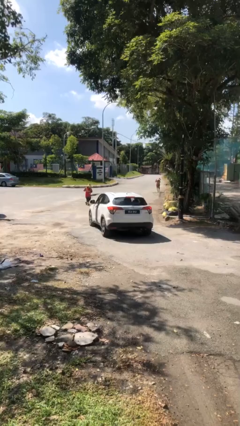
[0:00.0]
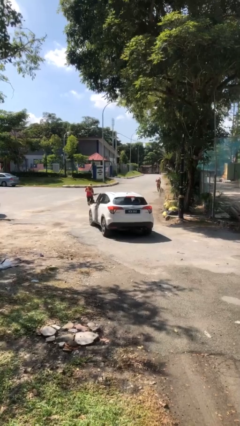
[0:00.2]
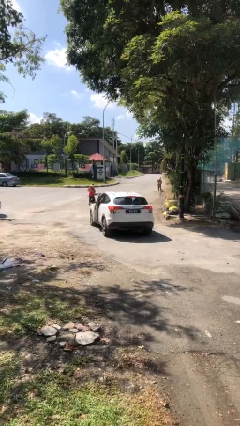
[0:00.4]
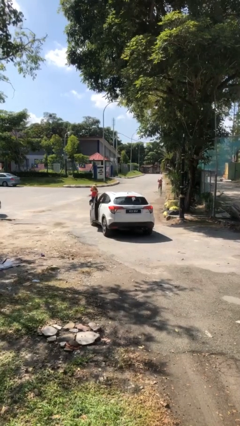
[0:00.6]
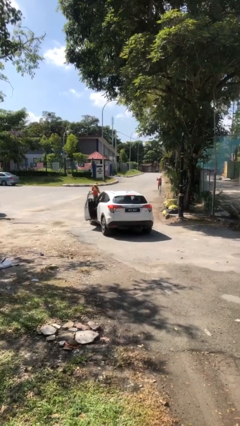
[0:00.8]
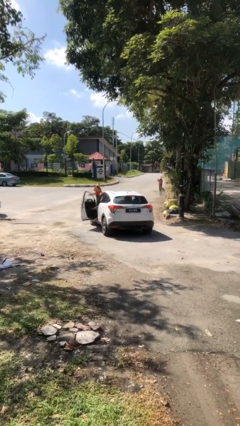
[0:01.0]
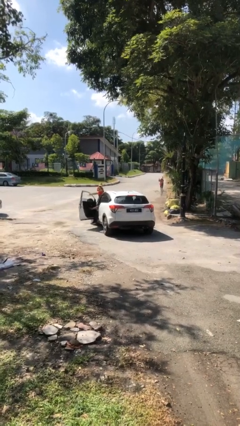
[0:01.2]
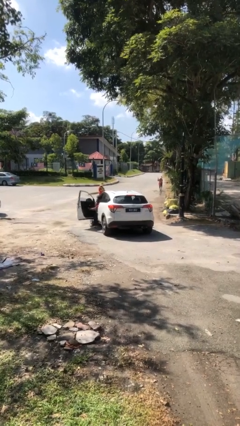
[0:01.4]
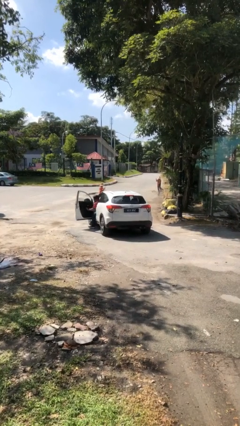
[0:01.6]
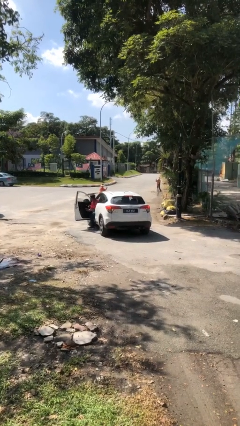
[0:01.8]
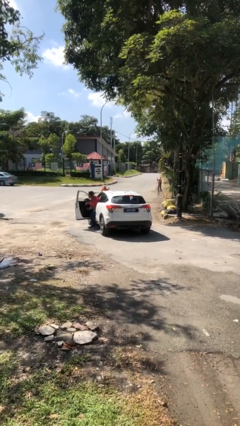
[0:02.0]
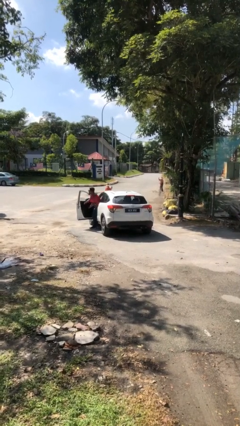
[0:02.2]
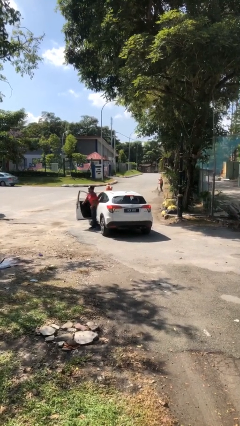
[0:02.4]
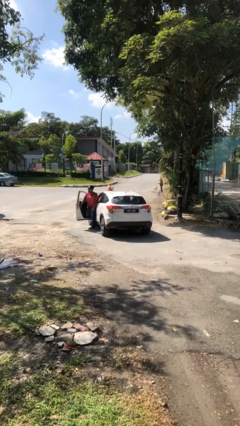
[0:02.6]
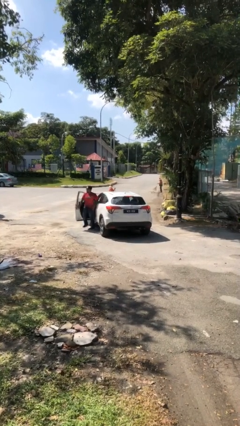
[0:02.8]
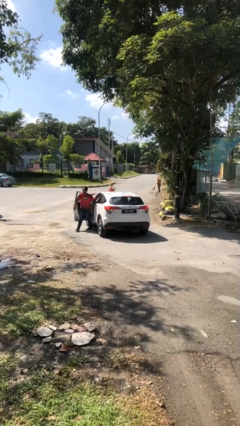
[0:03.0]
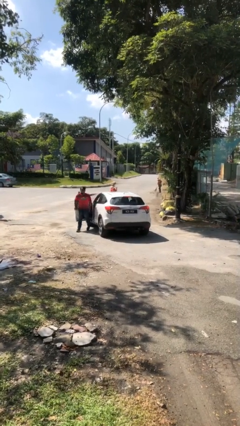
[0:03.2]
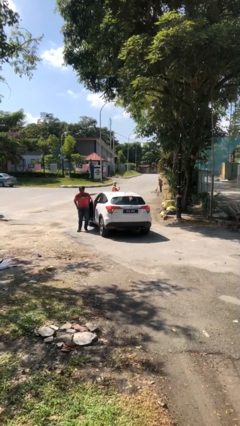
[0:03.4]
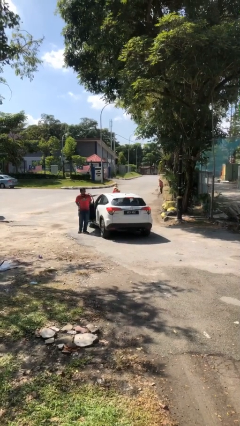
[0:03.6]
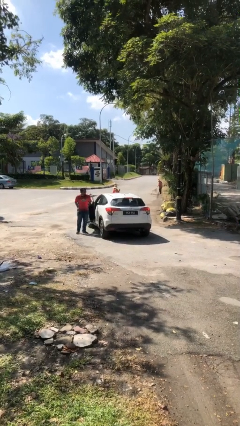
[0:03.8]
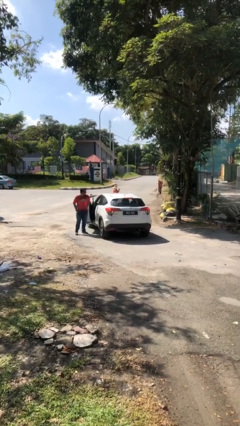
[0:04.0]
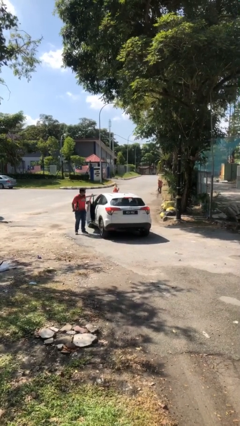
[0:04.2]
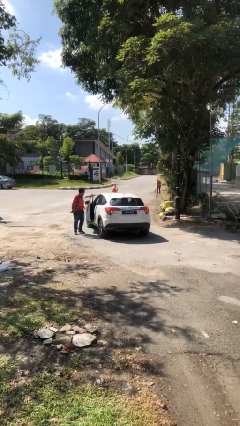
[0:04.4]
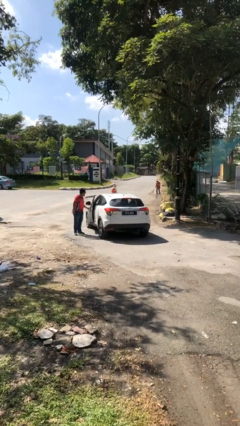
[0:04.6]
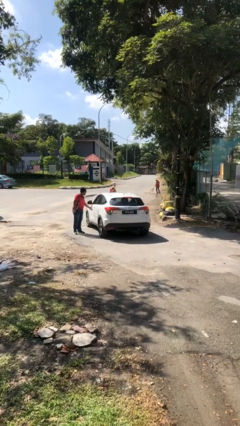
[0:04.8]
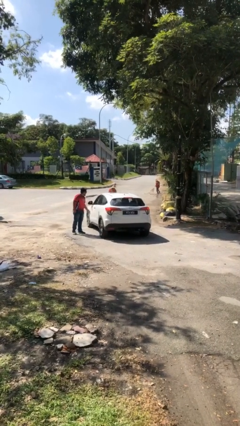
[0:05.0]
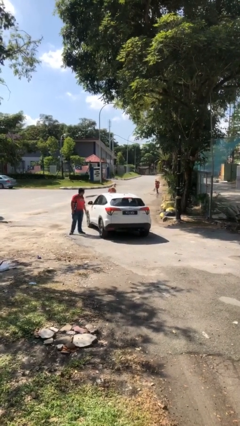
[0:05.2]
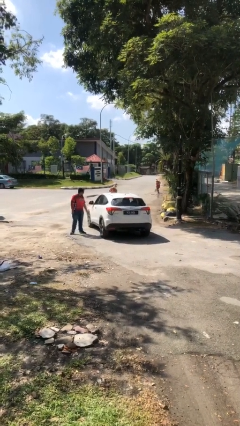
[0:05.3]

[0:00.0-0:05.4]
car drops off person

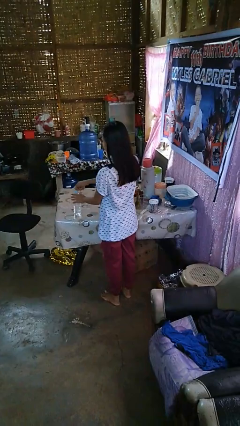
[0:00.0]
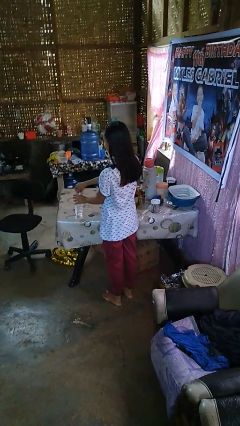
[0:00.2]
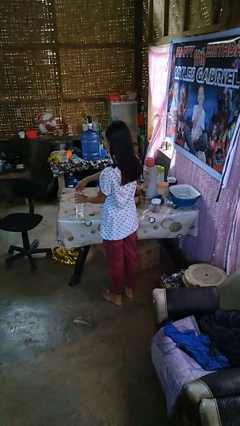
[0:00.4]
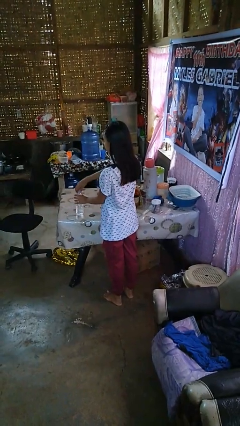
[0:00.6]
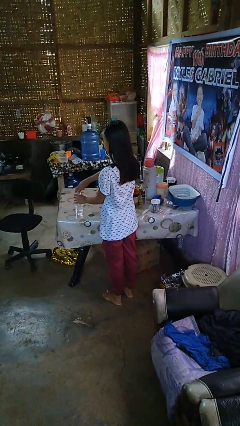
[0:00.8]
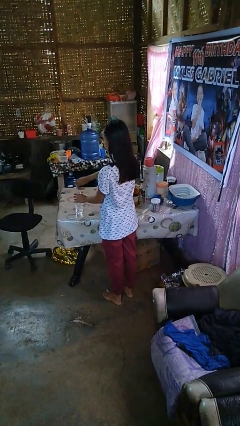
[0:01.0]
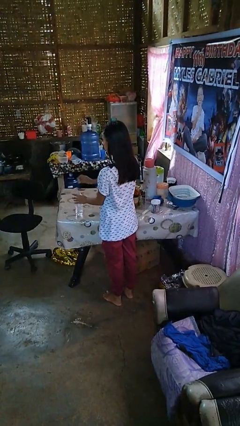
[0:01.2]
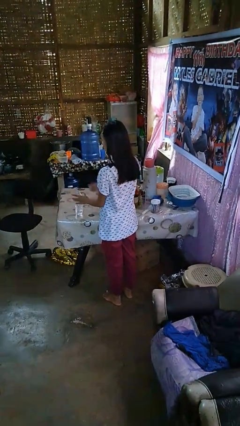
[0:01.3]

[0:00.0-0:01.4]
person unscrews lid from bottle

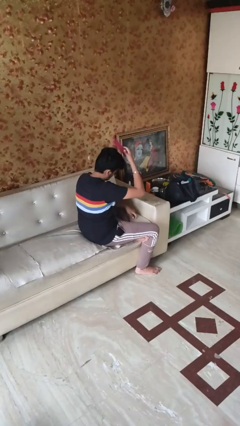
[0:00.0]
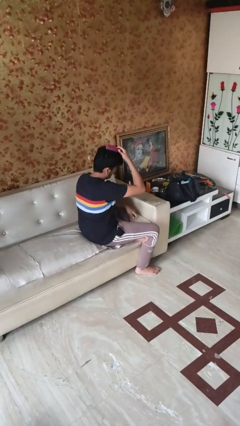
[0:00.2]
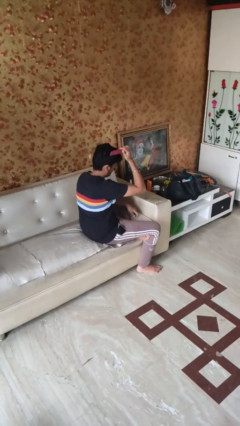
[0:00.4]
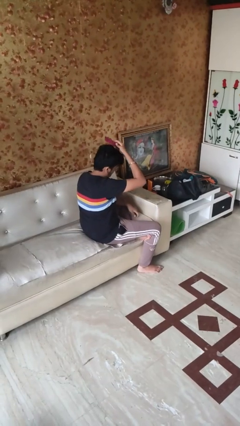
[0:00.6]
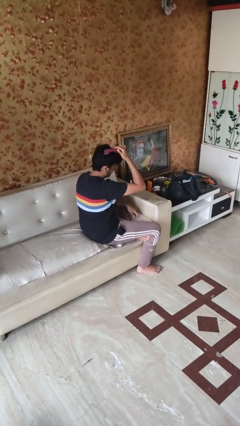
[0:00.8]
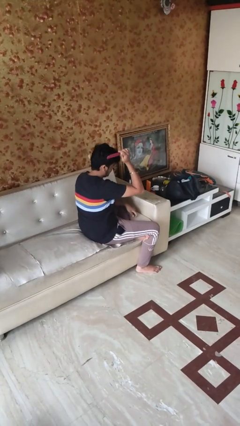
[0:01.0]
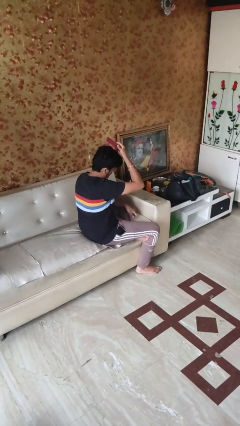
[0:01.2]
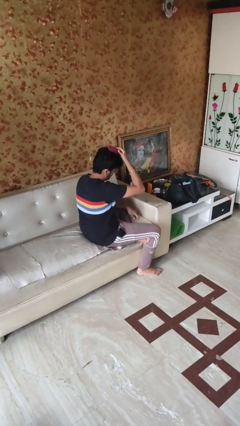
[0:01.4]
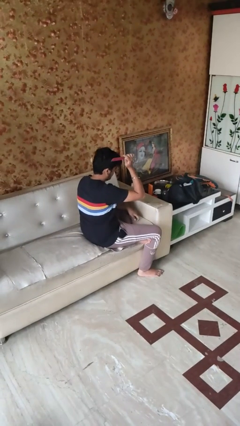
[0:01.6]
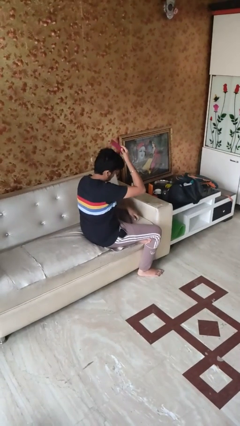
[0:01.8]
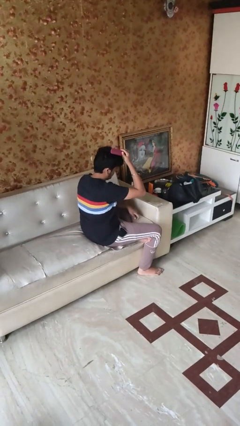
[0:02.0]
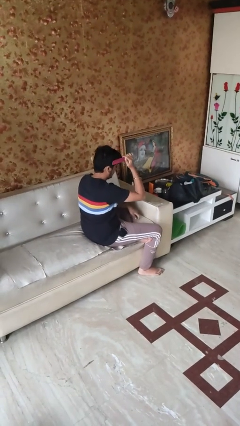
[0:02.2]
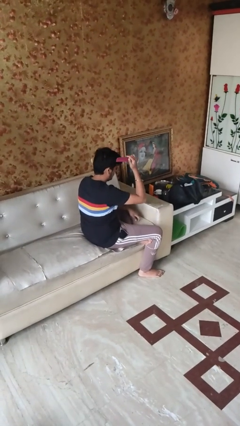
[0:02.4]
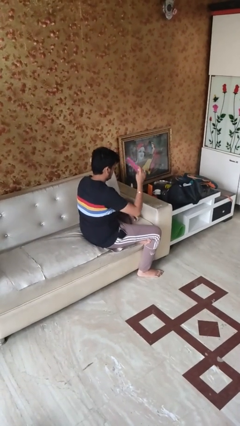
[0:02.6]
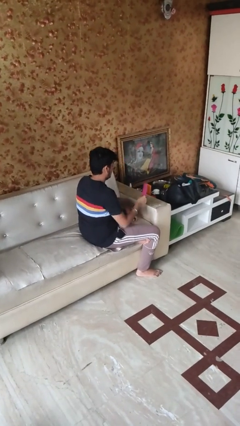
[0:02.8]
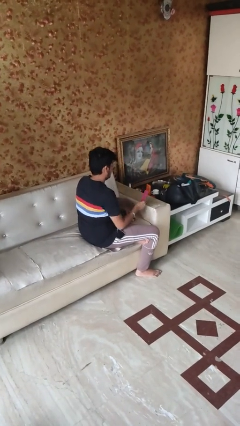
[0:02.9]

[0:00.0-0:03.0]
person brushes hair

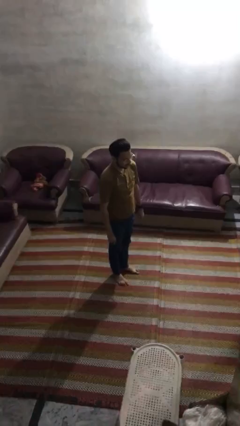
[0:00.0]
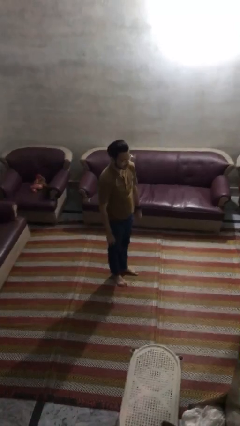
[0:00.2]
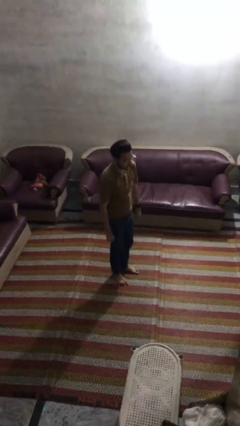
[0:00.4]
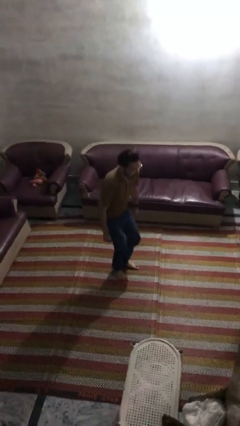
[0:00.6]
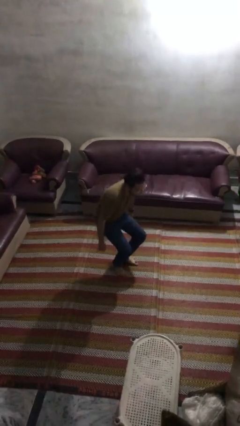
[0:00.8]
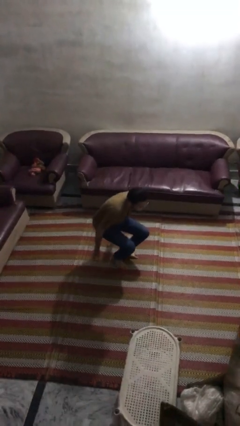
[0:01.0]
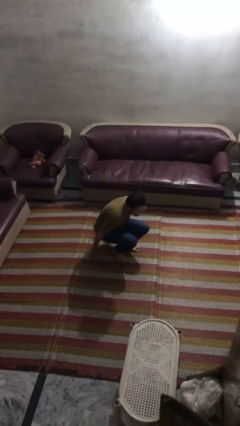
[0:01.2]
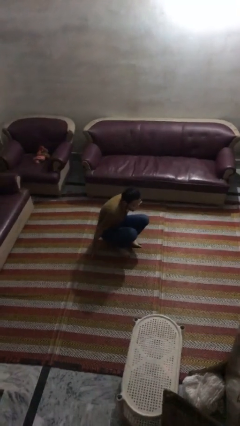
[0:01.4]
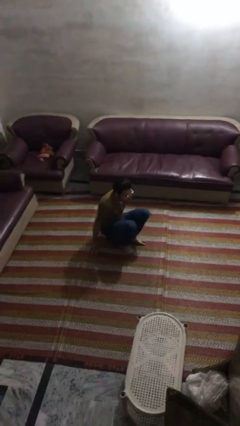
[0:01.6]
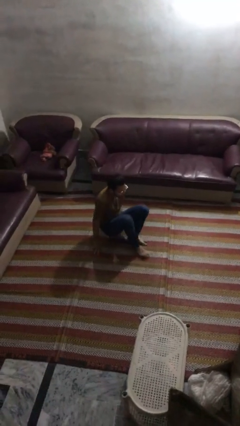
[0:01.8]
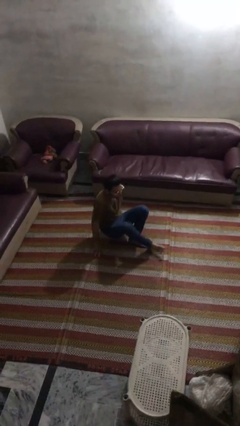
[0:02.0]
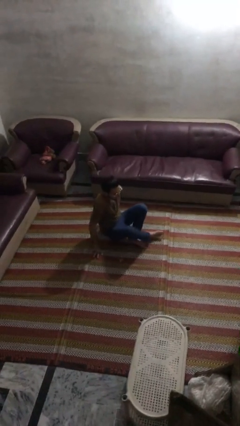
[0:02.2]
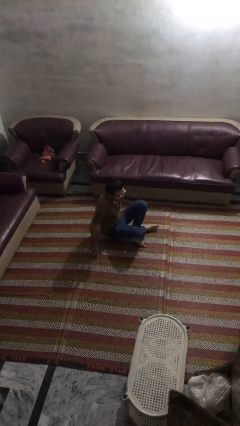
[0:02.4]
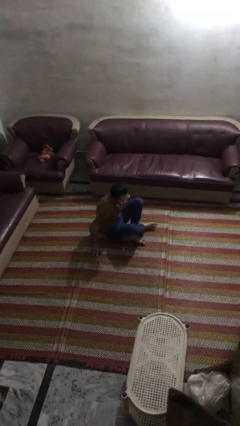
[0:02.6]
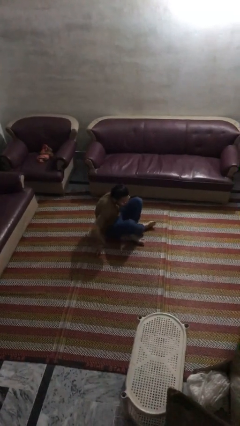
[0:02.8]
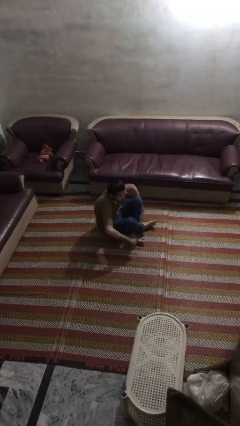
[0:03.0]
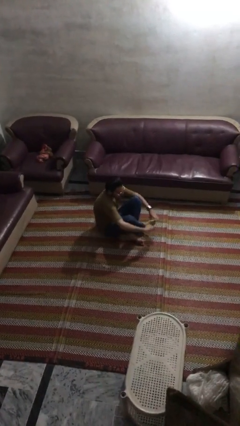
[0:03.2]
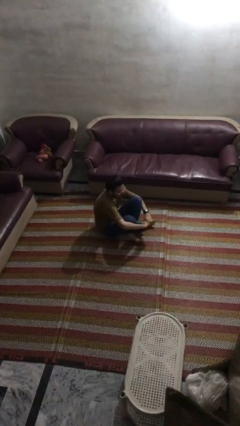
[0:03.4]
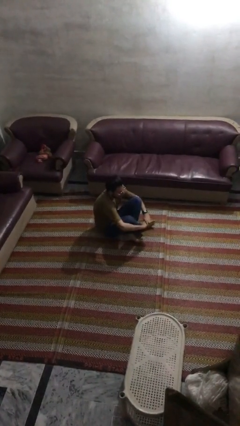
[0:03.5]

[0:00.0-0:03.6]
person sits crisscross

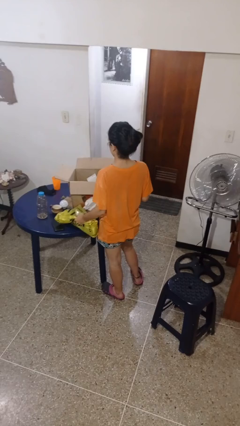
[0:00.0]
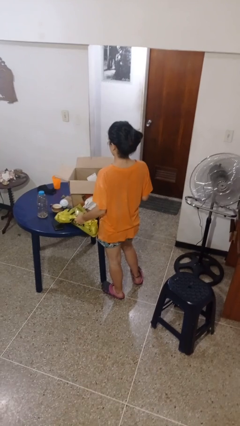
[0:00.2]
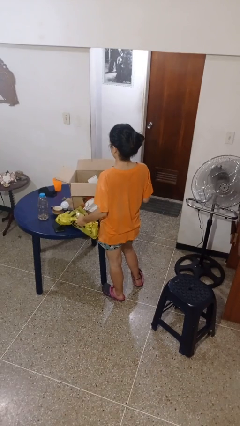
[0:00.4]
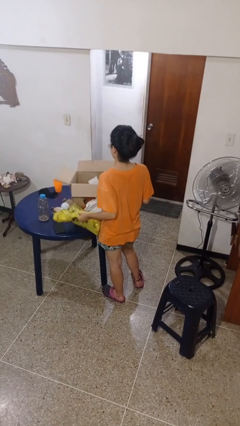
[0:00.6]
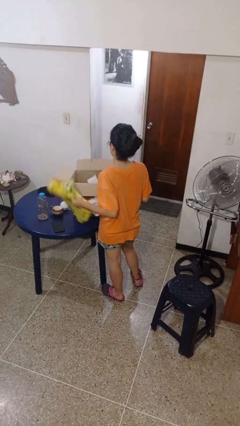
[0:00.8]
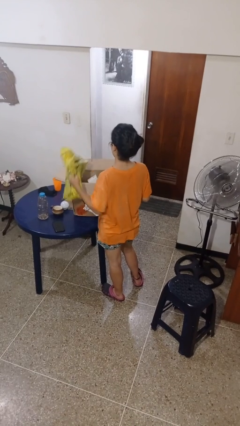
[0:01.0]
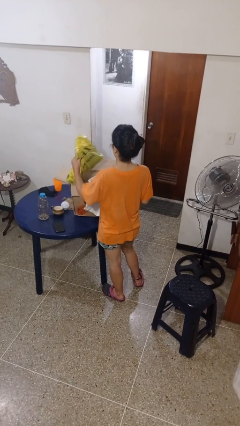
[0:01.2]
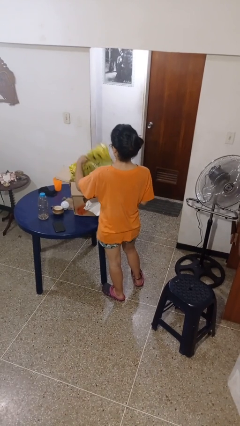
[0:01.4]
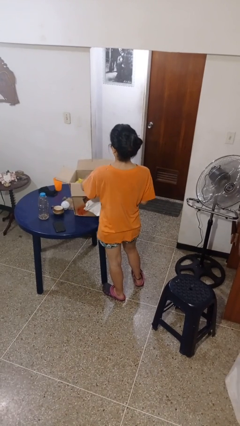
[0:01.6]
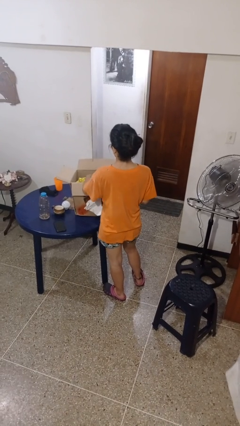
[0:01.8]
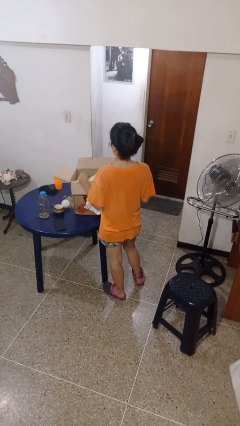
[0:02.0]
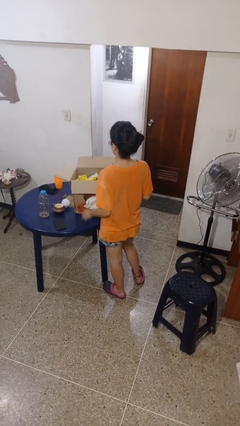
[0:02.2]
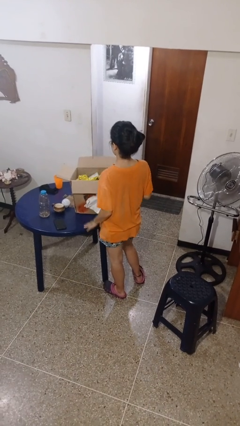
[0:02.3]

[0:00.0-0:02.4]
person puts object into box

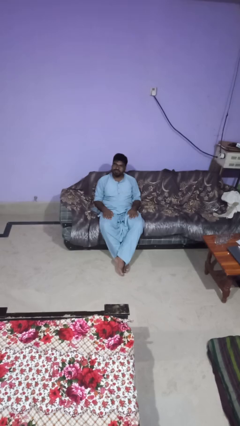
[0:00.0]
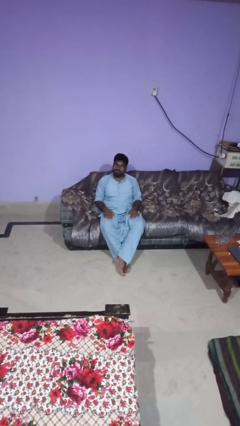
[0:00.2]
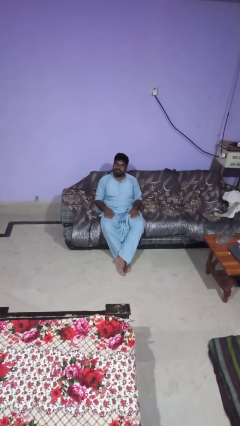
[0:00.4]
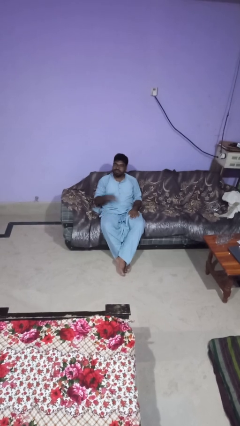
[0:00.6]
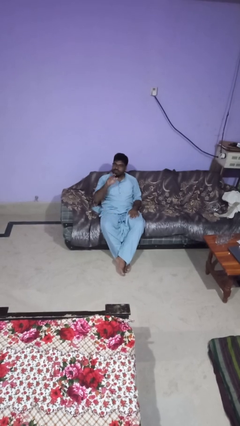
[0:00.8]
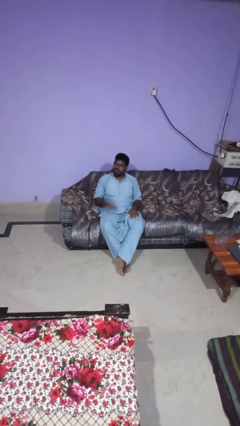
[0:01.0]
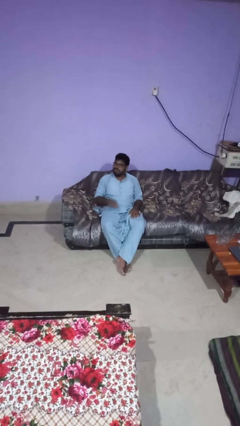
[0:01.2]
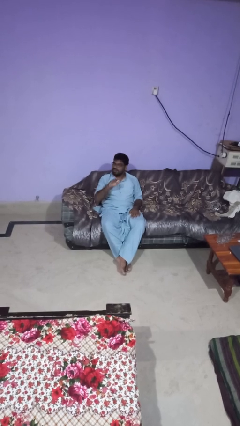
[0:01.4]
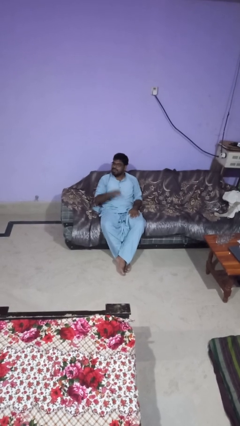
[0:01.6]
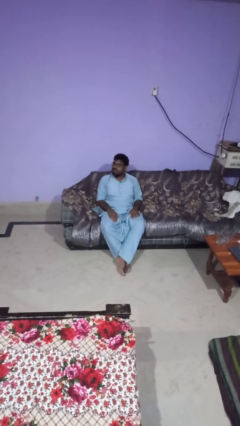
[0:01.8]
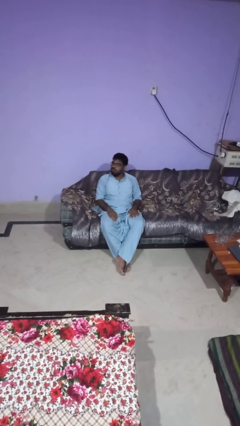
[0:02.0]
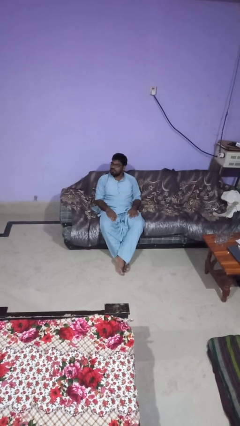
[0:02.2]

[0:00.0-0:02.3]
person slaps hands on thighs
